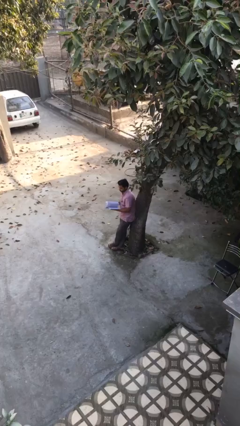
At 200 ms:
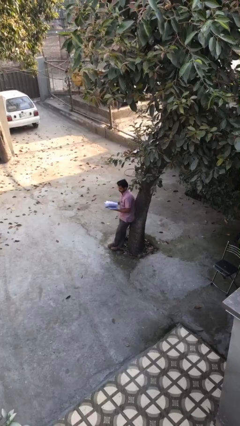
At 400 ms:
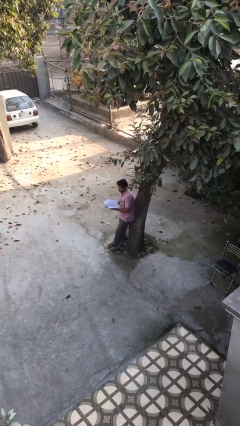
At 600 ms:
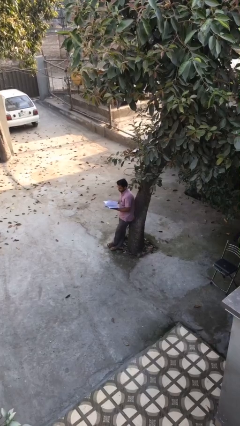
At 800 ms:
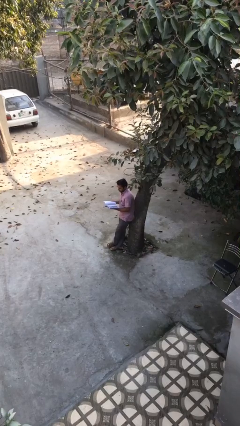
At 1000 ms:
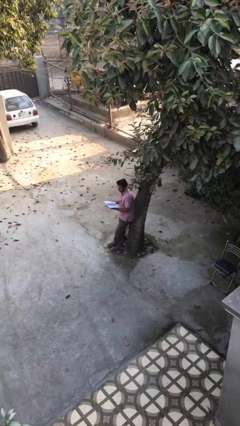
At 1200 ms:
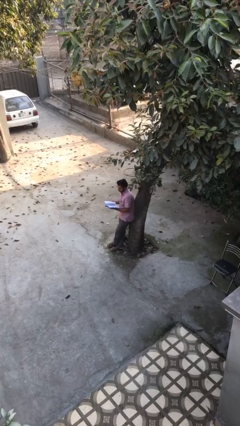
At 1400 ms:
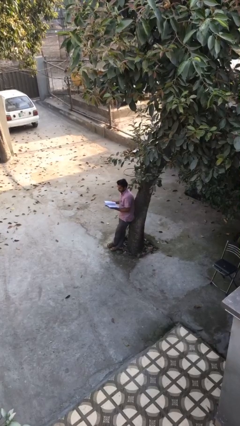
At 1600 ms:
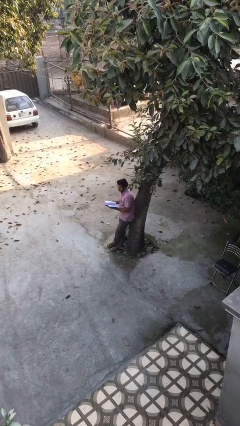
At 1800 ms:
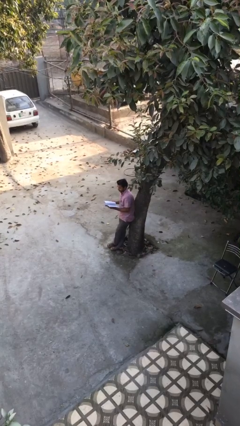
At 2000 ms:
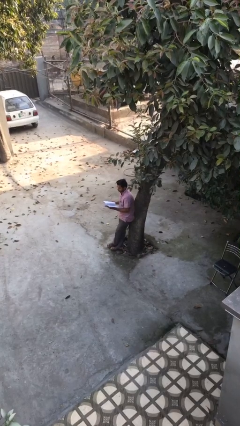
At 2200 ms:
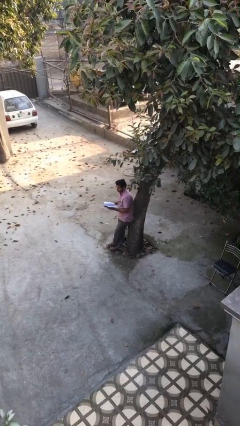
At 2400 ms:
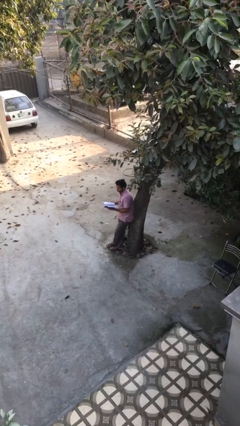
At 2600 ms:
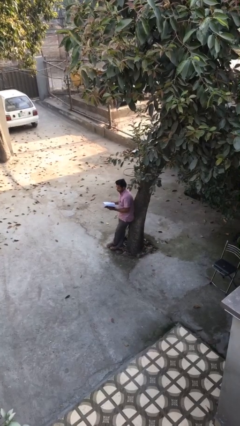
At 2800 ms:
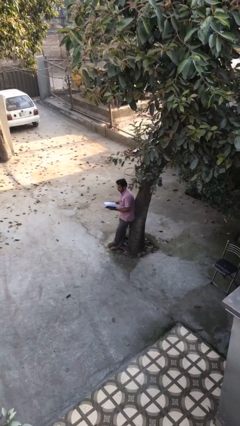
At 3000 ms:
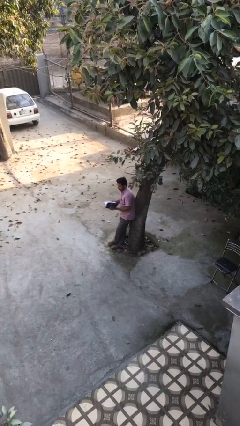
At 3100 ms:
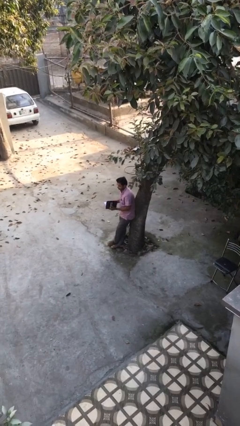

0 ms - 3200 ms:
person reads document

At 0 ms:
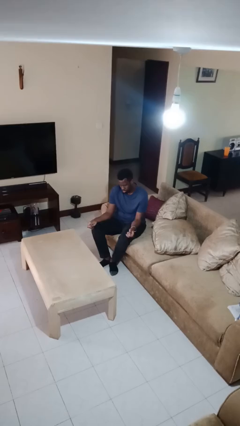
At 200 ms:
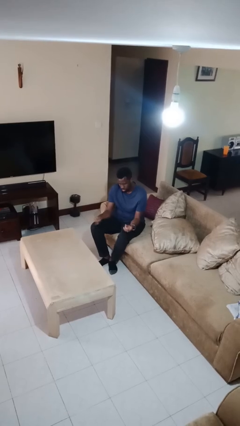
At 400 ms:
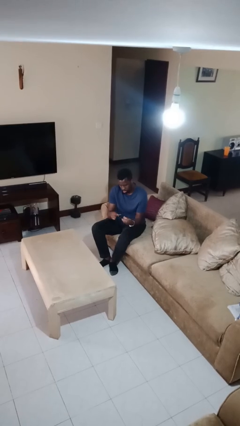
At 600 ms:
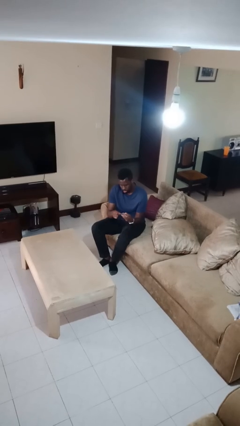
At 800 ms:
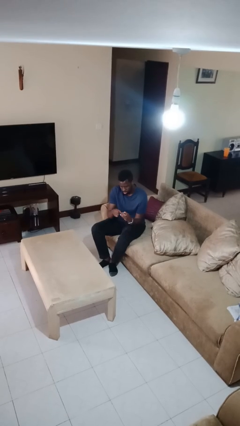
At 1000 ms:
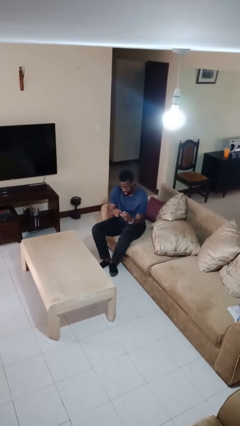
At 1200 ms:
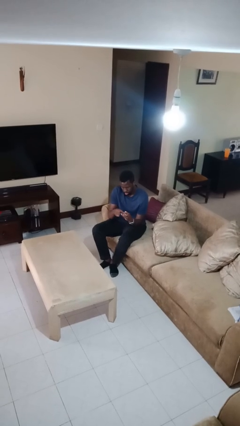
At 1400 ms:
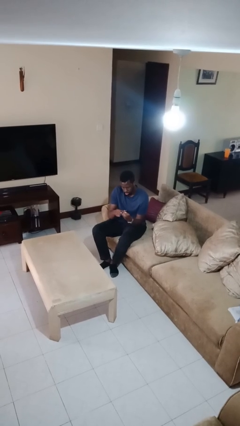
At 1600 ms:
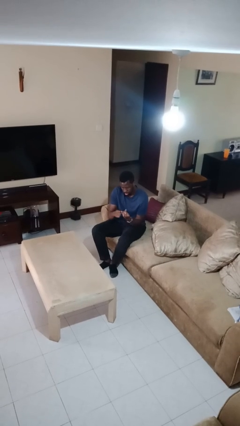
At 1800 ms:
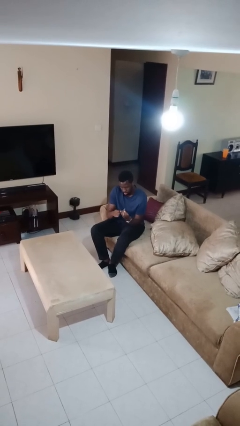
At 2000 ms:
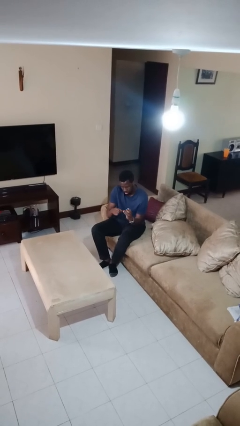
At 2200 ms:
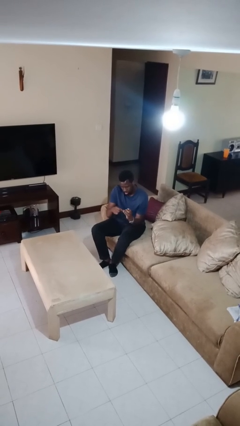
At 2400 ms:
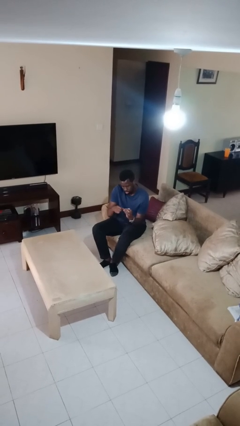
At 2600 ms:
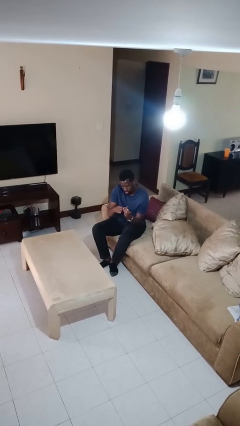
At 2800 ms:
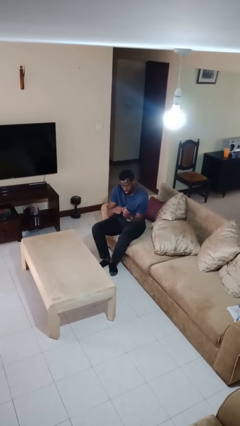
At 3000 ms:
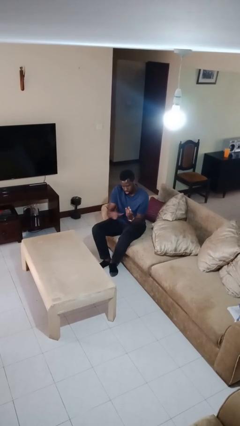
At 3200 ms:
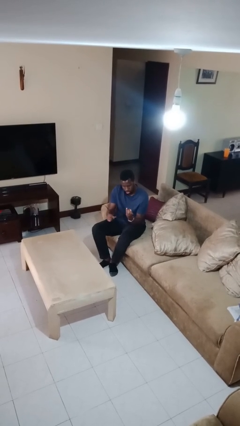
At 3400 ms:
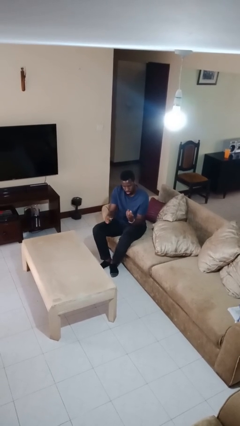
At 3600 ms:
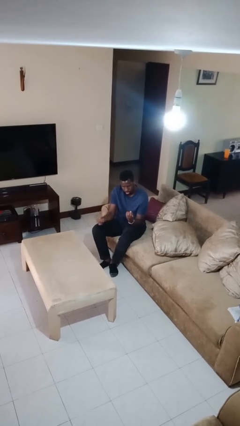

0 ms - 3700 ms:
person files fingernails

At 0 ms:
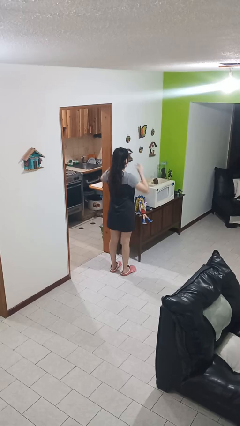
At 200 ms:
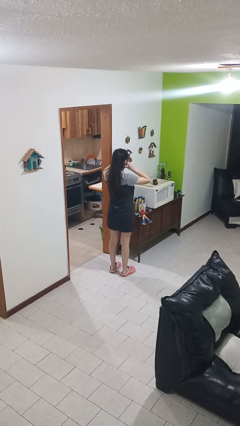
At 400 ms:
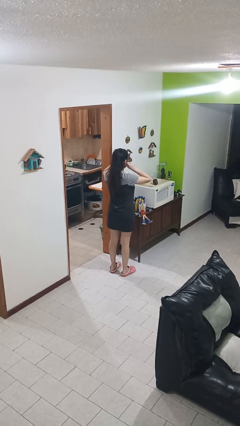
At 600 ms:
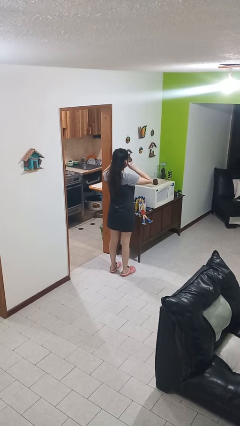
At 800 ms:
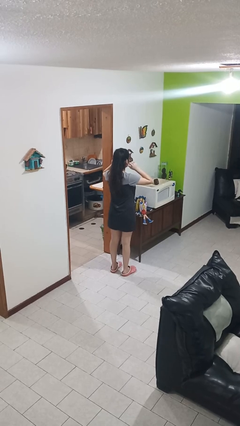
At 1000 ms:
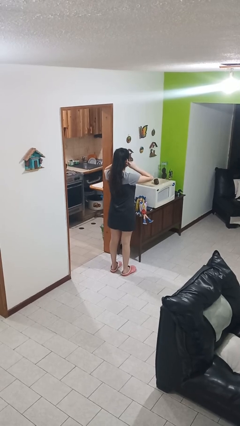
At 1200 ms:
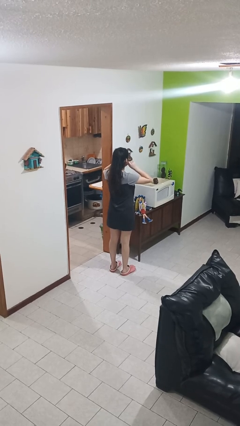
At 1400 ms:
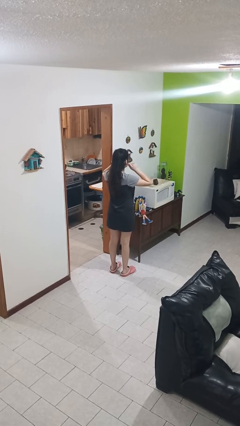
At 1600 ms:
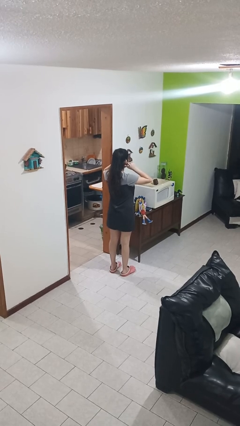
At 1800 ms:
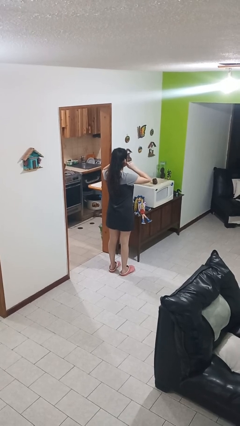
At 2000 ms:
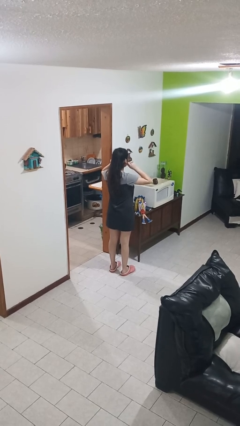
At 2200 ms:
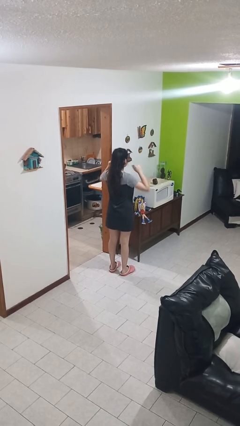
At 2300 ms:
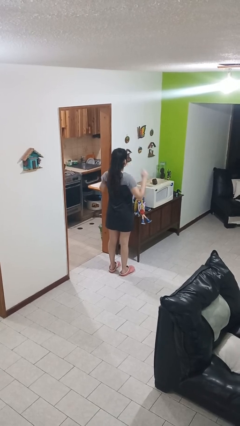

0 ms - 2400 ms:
person touches earlobe

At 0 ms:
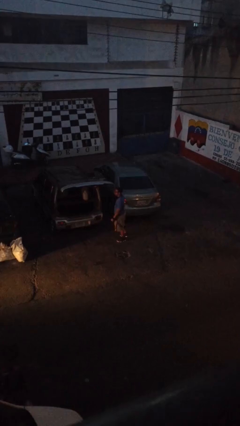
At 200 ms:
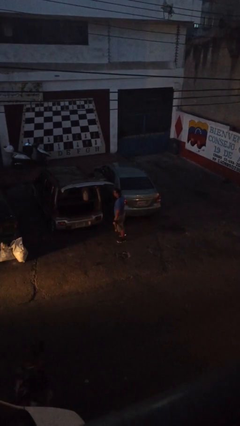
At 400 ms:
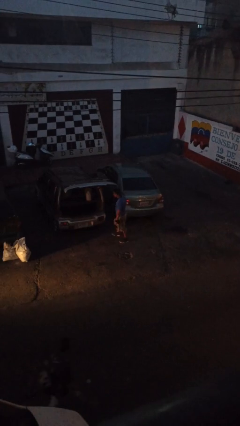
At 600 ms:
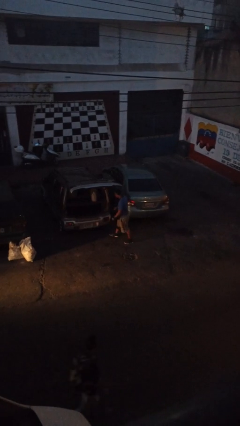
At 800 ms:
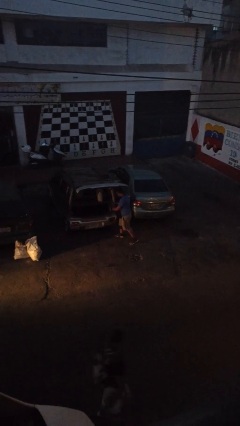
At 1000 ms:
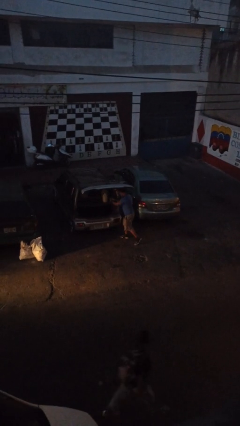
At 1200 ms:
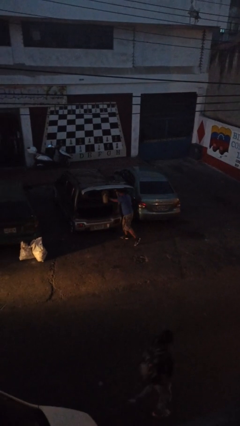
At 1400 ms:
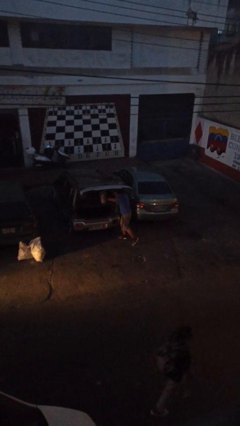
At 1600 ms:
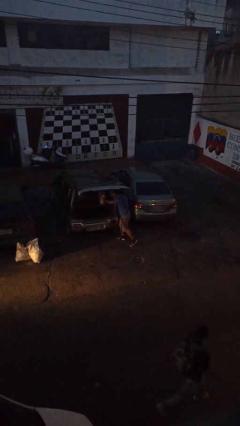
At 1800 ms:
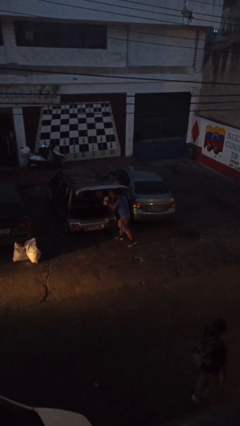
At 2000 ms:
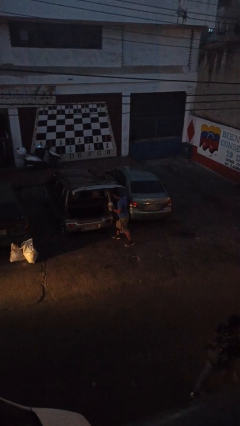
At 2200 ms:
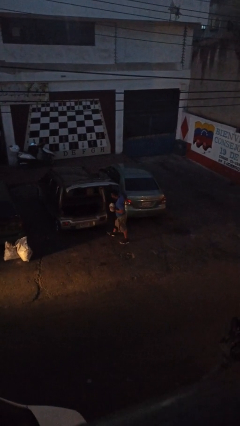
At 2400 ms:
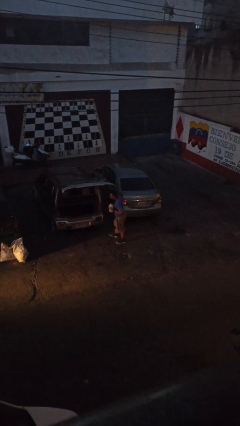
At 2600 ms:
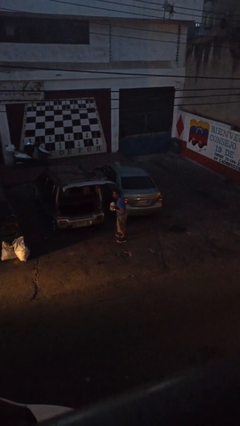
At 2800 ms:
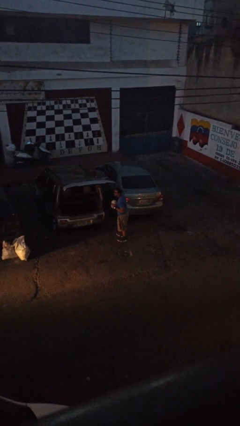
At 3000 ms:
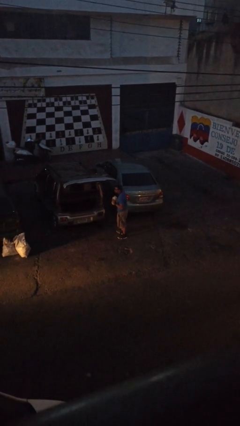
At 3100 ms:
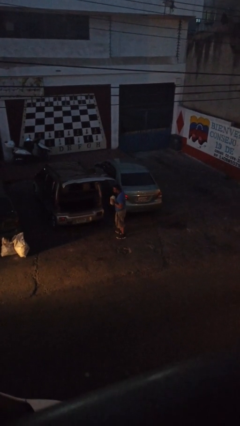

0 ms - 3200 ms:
person unloads car

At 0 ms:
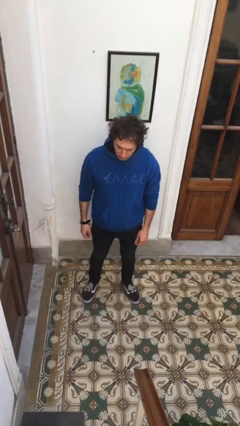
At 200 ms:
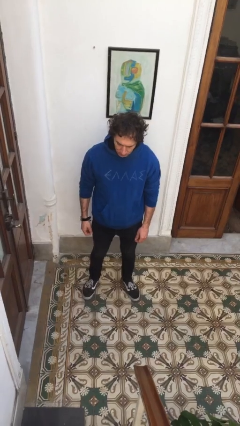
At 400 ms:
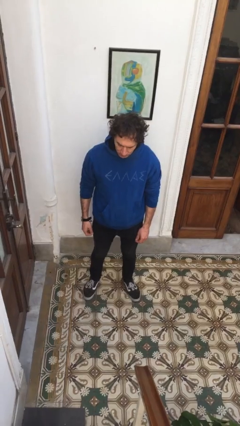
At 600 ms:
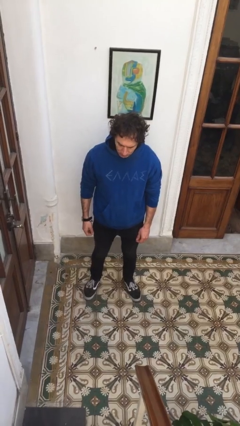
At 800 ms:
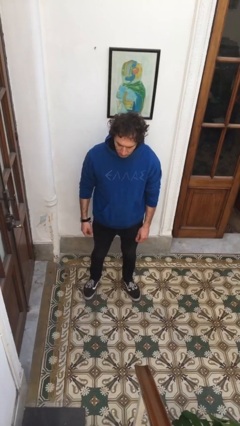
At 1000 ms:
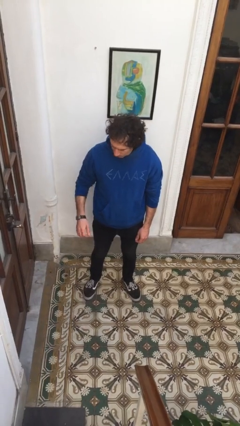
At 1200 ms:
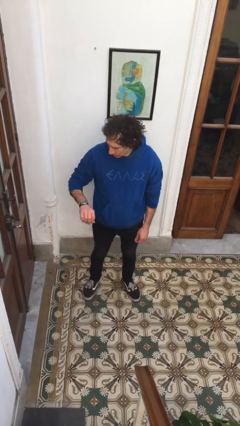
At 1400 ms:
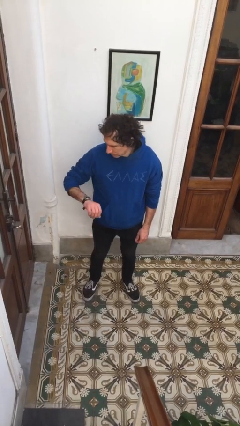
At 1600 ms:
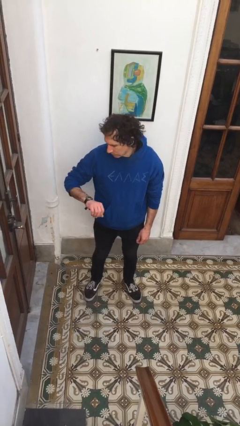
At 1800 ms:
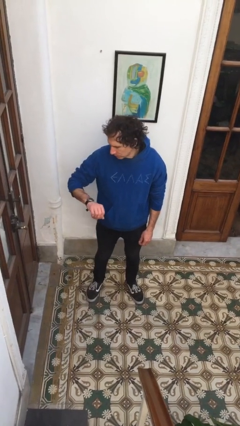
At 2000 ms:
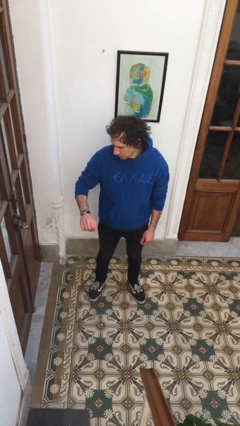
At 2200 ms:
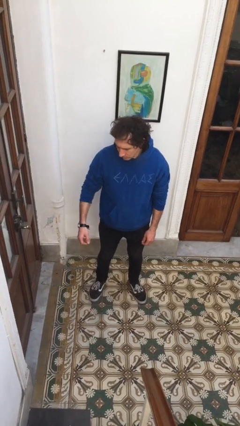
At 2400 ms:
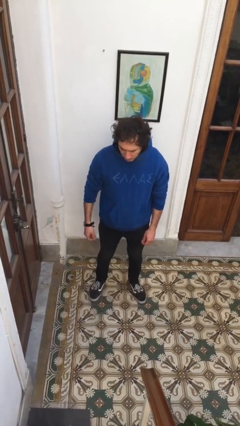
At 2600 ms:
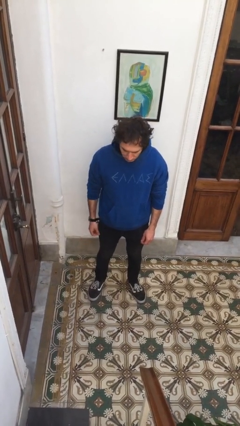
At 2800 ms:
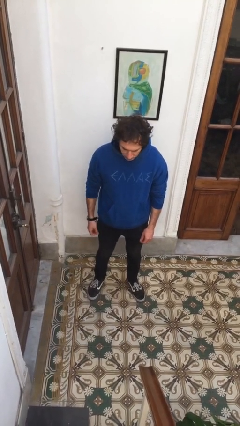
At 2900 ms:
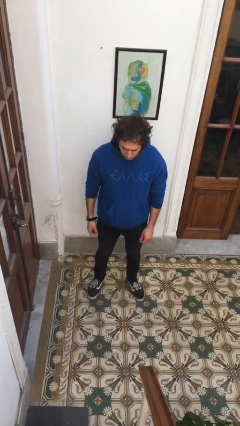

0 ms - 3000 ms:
person looks at wristwatch

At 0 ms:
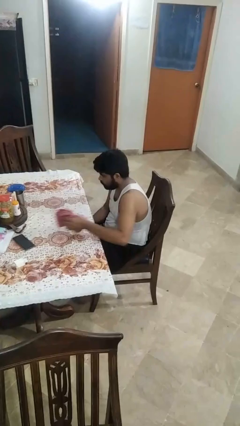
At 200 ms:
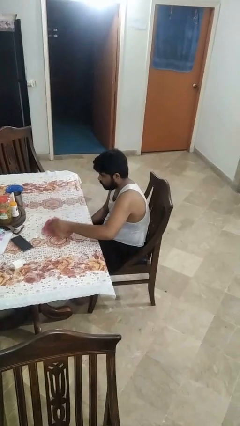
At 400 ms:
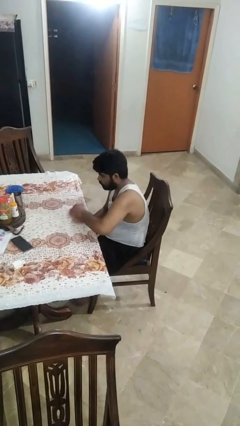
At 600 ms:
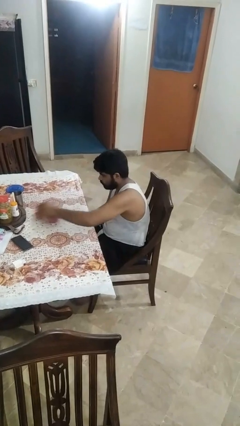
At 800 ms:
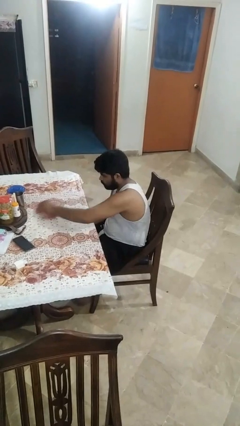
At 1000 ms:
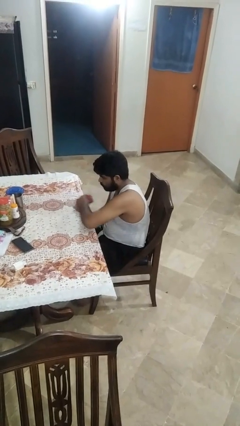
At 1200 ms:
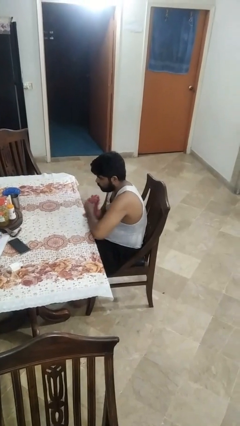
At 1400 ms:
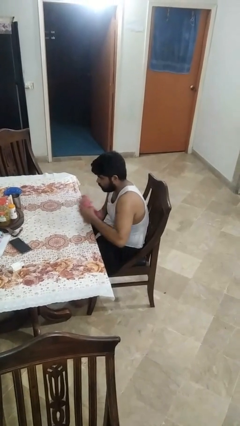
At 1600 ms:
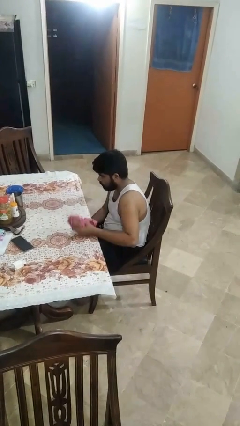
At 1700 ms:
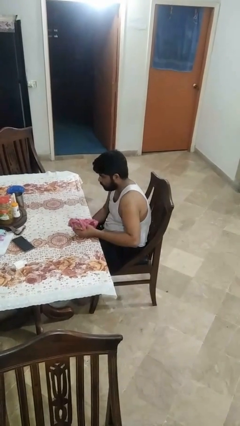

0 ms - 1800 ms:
person cleans table with rag

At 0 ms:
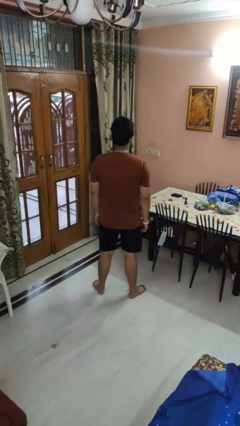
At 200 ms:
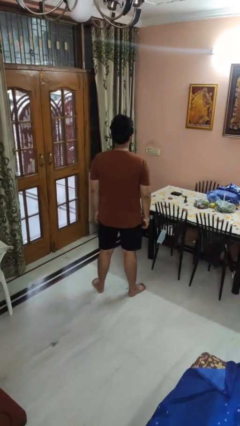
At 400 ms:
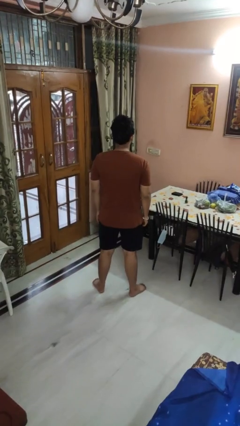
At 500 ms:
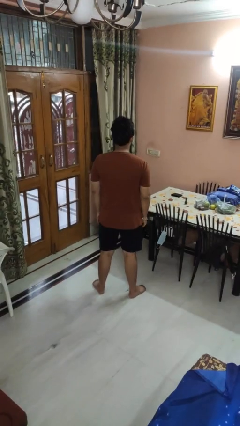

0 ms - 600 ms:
person strokes hair
